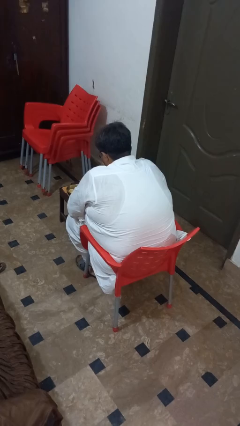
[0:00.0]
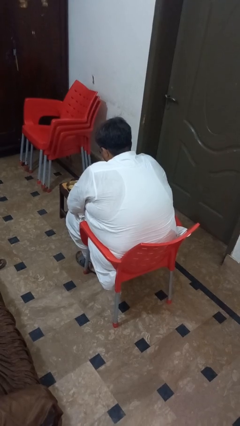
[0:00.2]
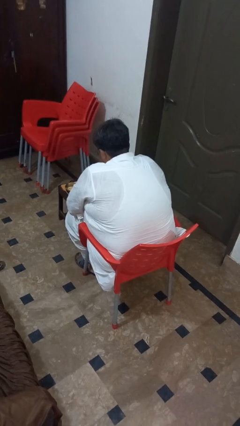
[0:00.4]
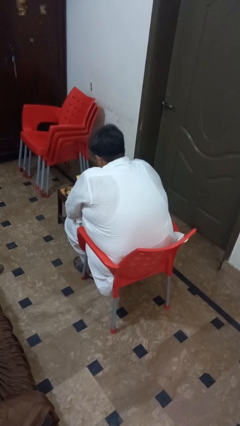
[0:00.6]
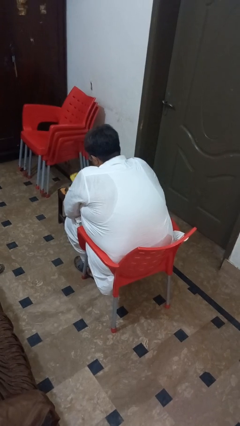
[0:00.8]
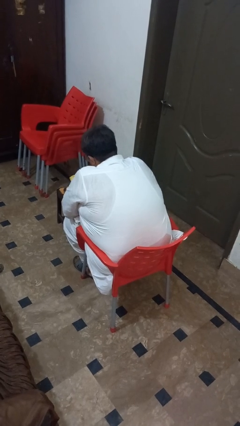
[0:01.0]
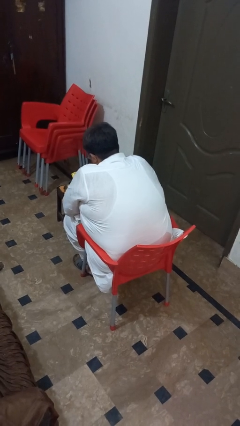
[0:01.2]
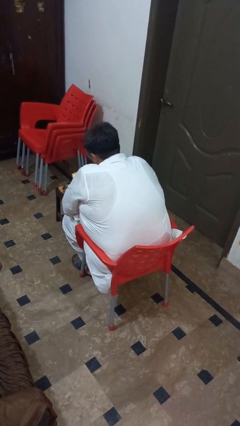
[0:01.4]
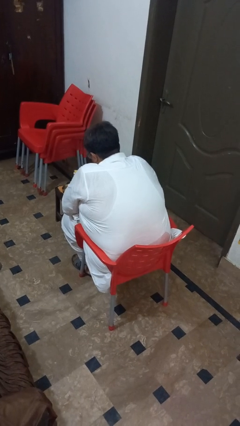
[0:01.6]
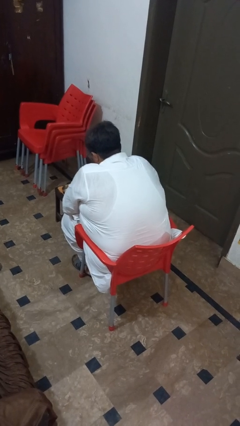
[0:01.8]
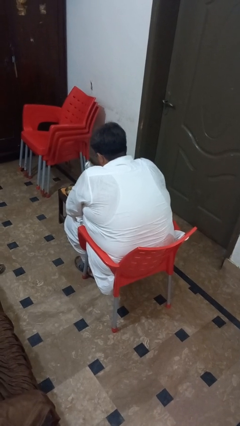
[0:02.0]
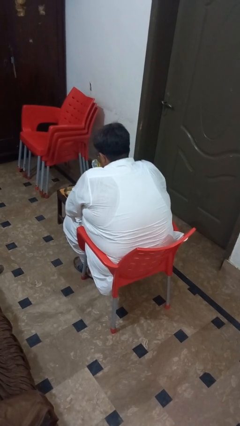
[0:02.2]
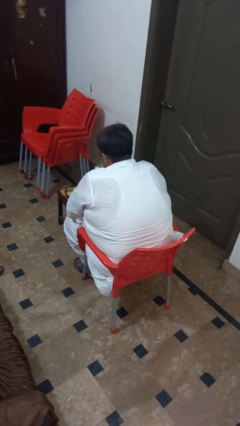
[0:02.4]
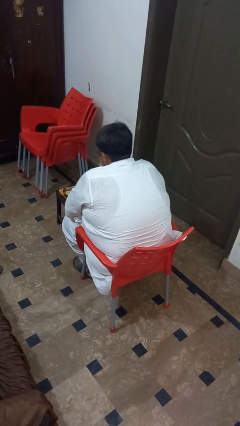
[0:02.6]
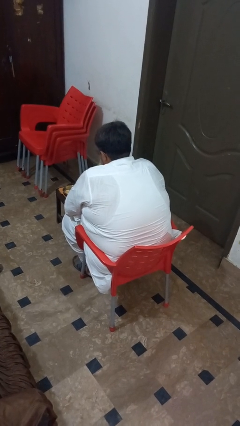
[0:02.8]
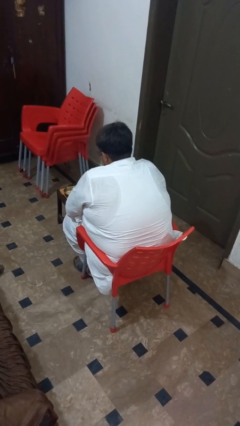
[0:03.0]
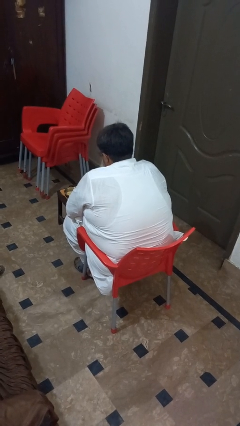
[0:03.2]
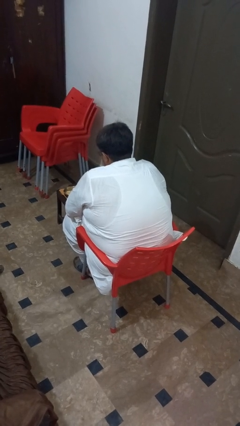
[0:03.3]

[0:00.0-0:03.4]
person pours into bowl

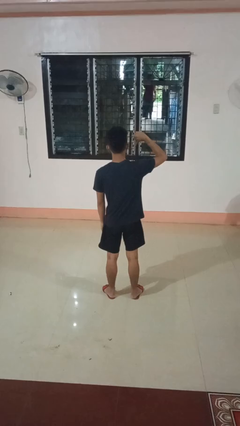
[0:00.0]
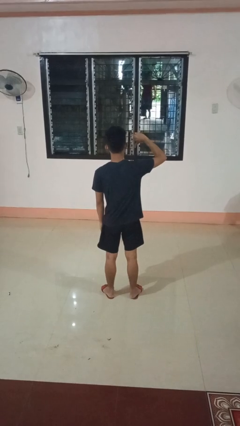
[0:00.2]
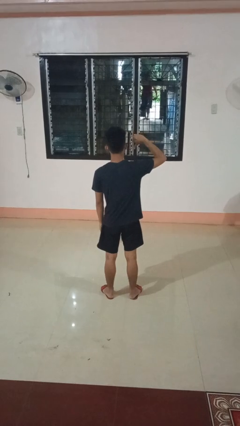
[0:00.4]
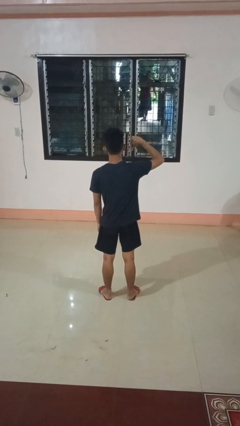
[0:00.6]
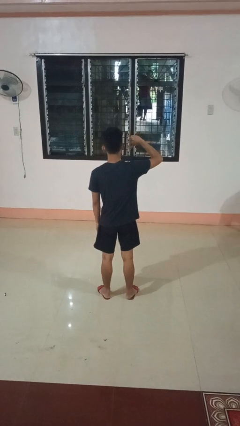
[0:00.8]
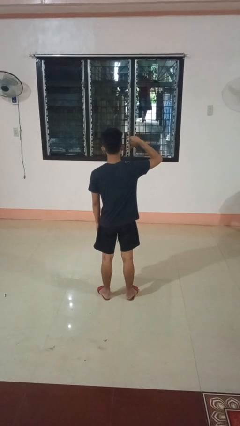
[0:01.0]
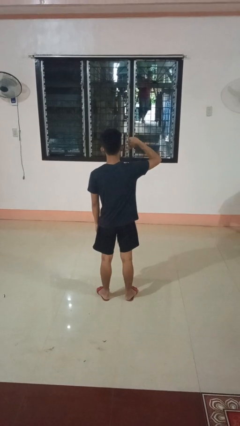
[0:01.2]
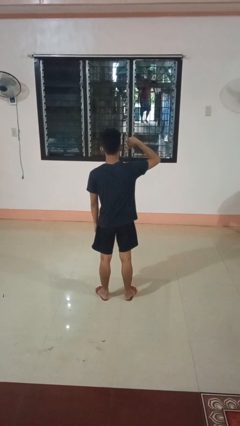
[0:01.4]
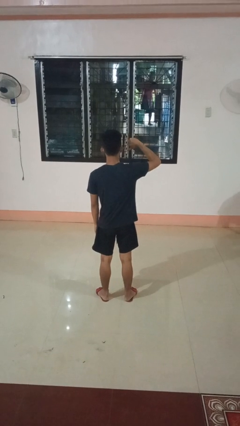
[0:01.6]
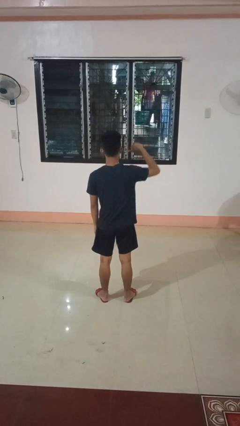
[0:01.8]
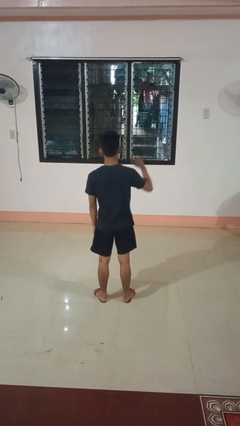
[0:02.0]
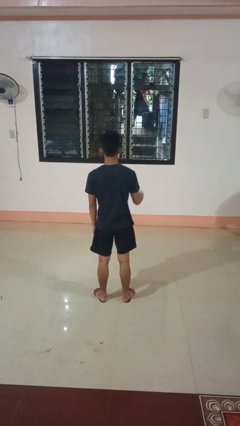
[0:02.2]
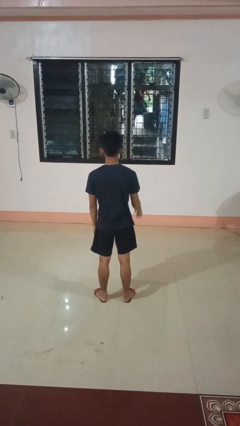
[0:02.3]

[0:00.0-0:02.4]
person gestures thumbs down

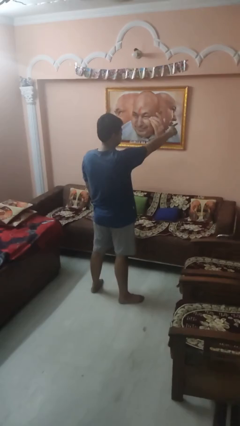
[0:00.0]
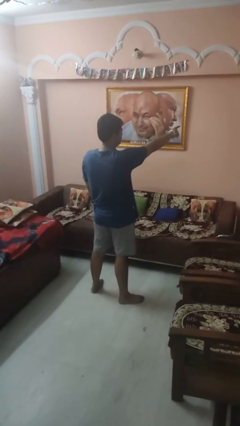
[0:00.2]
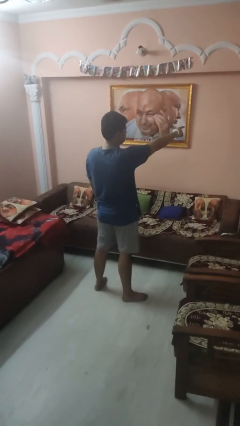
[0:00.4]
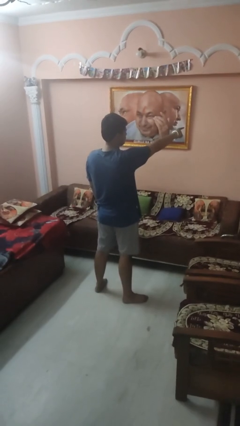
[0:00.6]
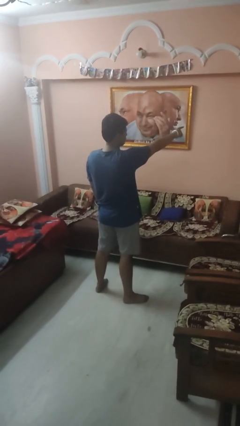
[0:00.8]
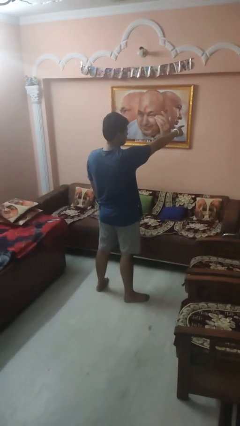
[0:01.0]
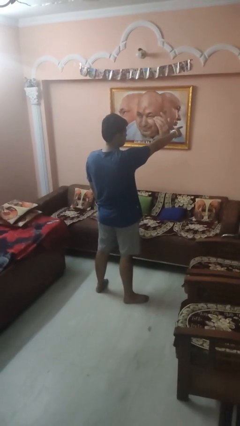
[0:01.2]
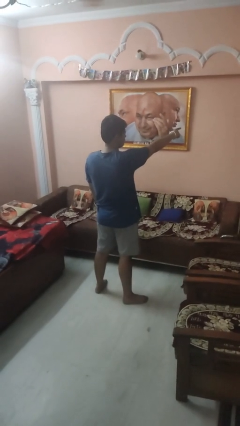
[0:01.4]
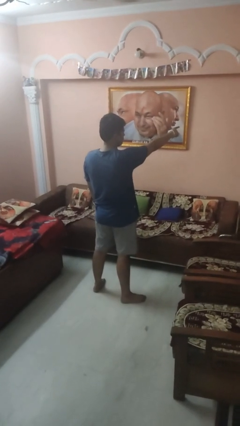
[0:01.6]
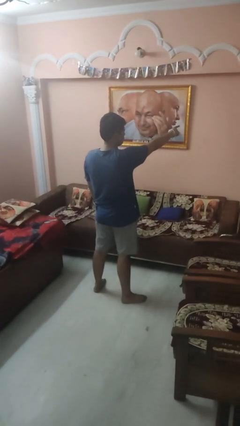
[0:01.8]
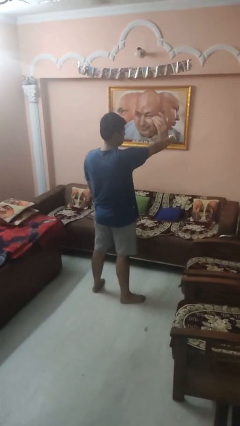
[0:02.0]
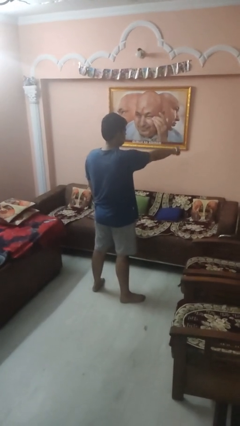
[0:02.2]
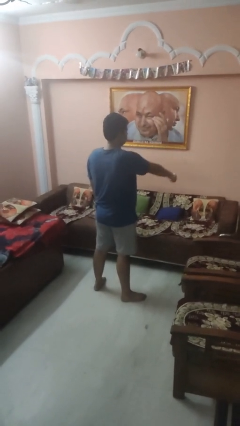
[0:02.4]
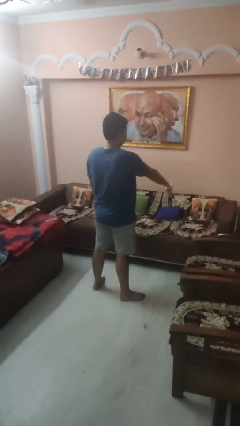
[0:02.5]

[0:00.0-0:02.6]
person points at person

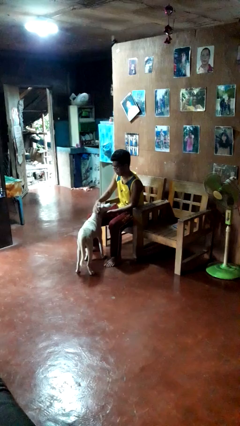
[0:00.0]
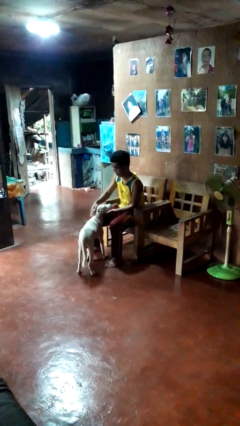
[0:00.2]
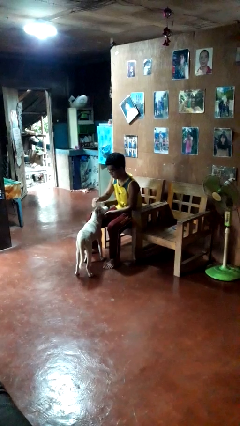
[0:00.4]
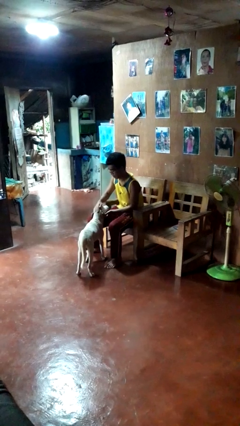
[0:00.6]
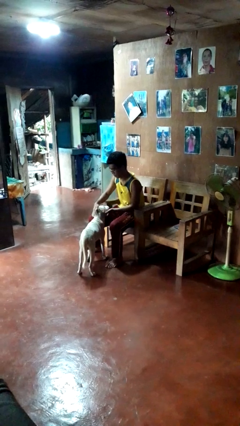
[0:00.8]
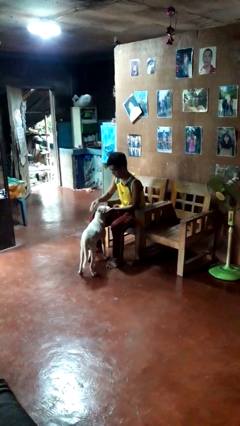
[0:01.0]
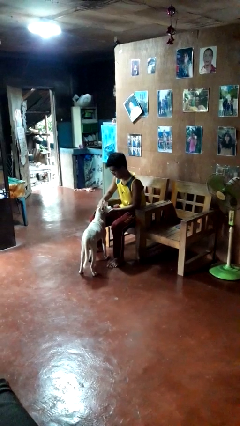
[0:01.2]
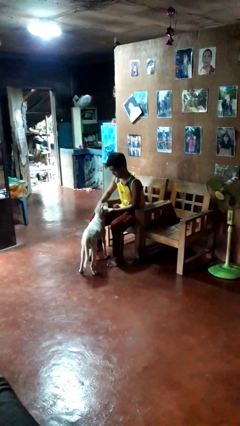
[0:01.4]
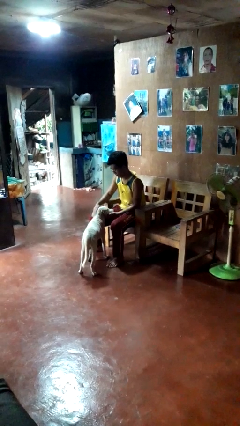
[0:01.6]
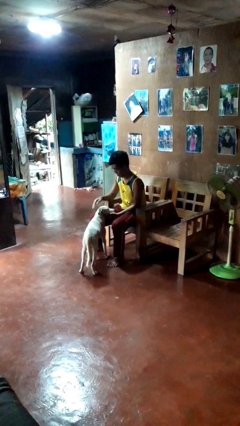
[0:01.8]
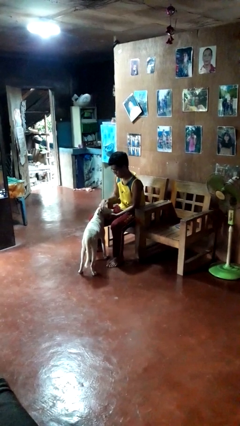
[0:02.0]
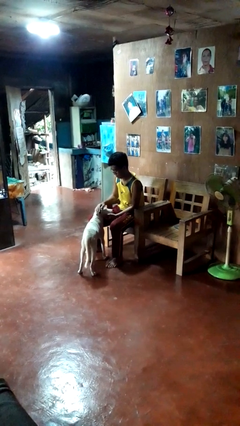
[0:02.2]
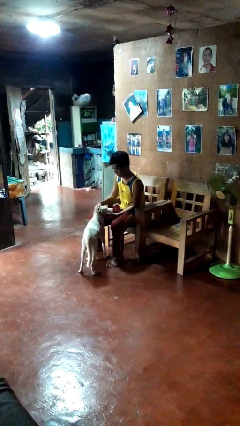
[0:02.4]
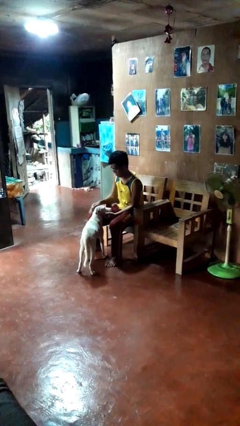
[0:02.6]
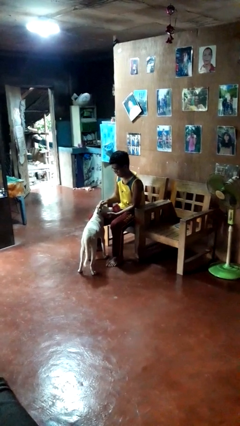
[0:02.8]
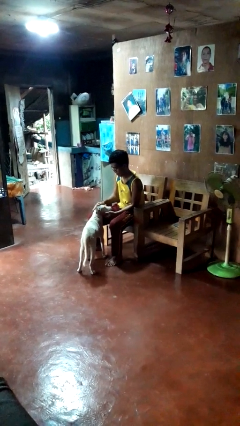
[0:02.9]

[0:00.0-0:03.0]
person pets dog

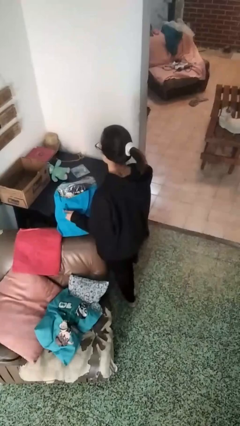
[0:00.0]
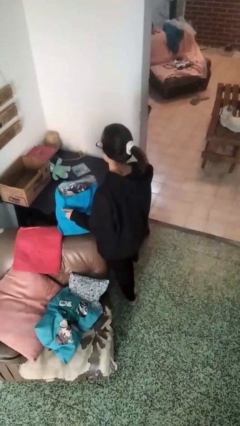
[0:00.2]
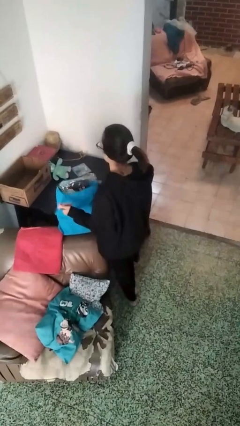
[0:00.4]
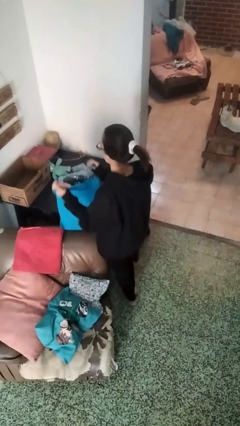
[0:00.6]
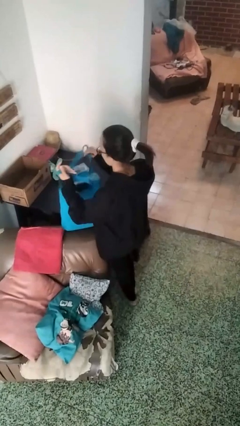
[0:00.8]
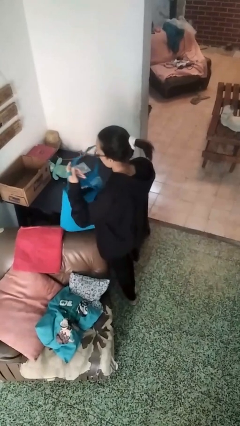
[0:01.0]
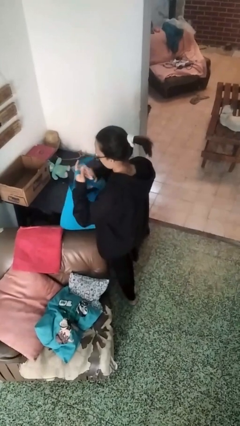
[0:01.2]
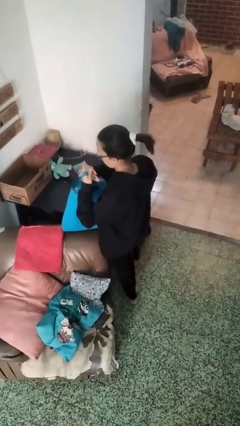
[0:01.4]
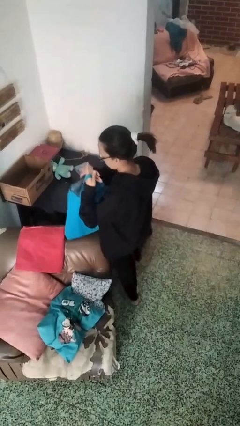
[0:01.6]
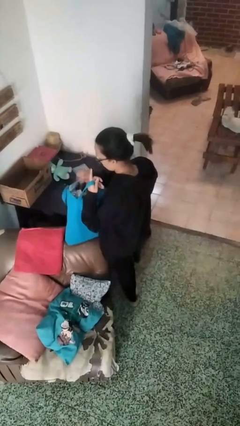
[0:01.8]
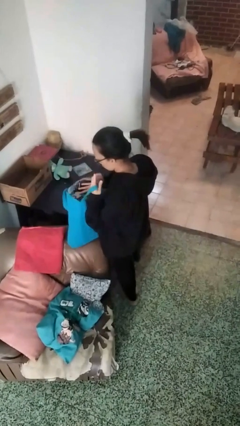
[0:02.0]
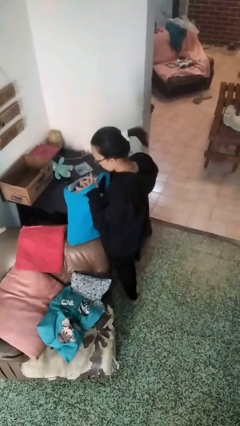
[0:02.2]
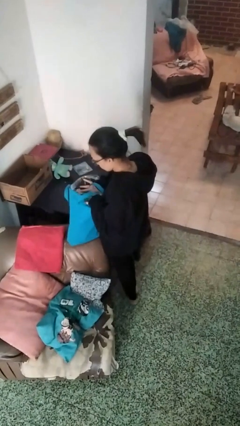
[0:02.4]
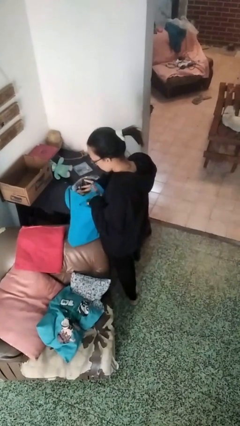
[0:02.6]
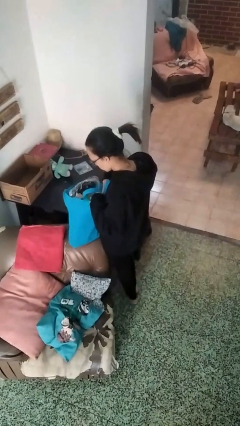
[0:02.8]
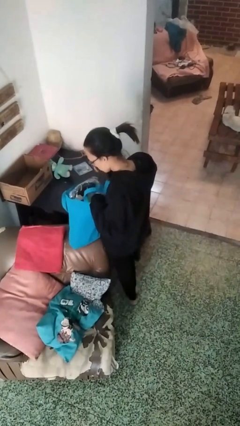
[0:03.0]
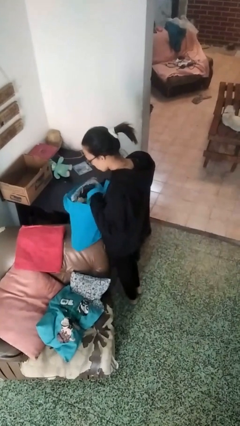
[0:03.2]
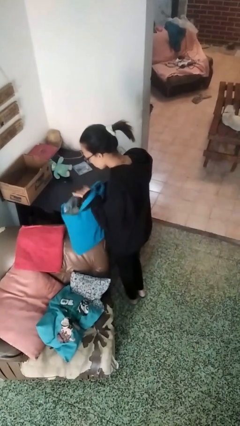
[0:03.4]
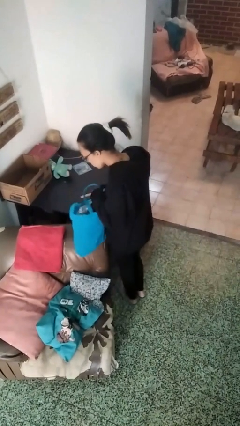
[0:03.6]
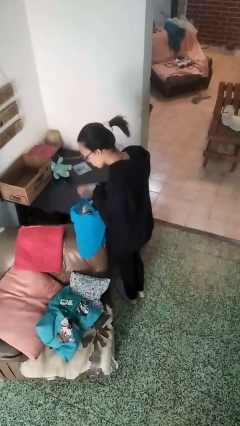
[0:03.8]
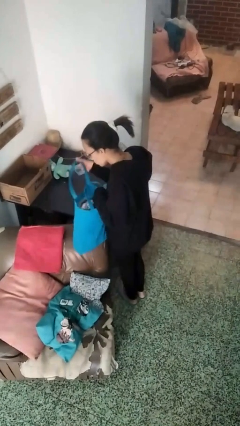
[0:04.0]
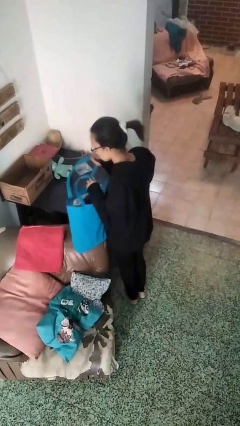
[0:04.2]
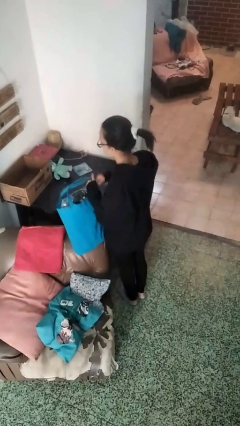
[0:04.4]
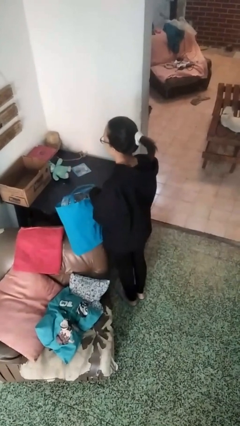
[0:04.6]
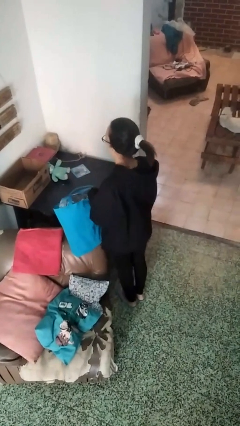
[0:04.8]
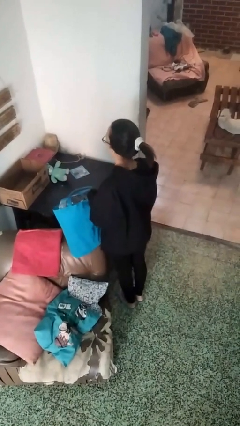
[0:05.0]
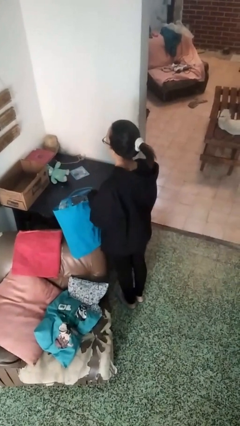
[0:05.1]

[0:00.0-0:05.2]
person searches in bag

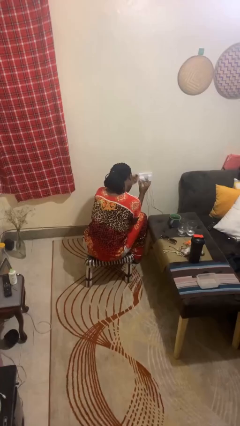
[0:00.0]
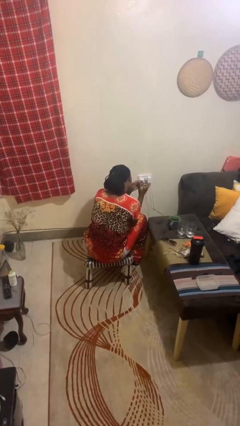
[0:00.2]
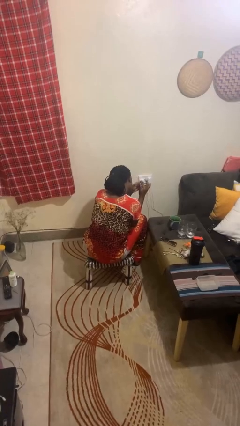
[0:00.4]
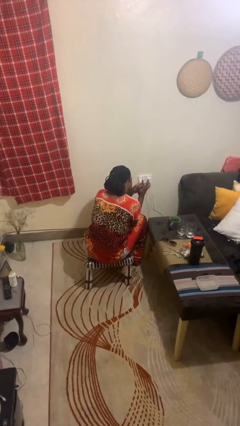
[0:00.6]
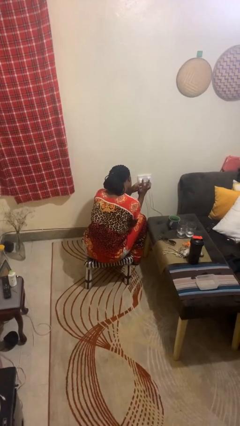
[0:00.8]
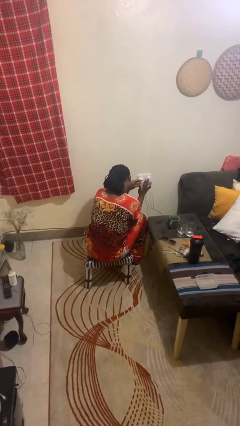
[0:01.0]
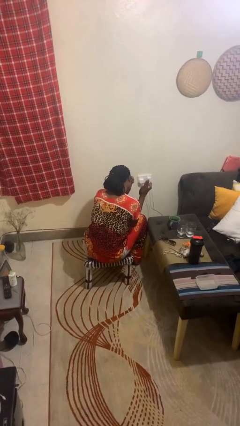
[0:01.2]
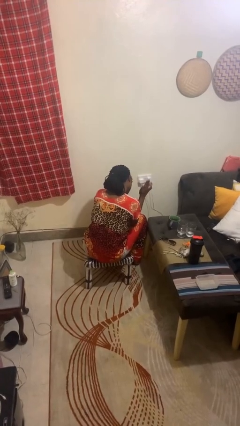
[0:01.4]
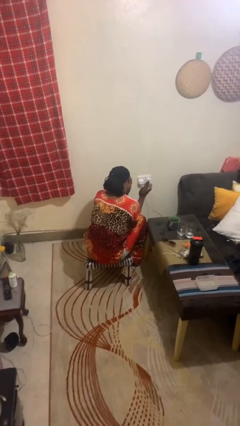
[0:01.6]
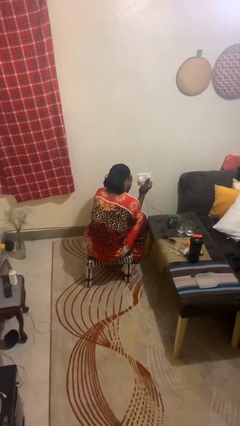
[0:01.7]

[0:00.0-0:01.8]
person puts on ring
